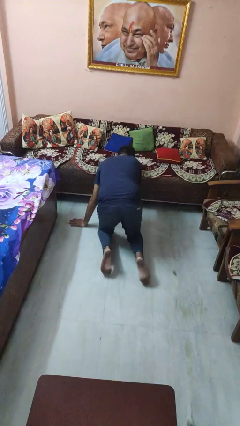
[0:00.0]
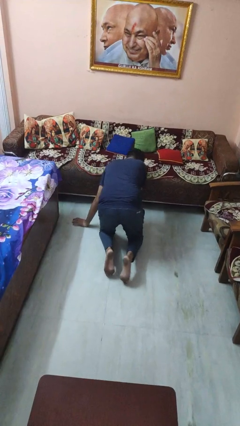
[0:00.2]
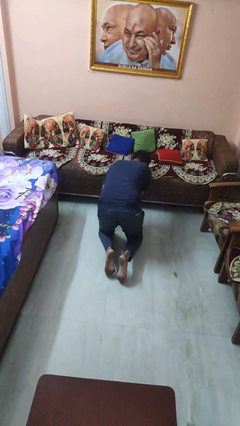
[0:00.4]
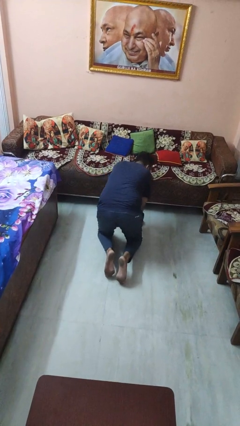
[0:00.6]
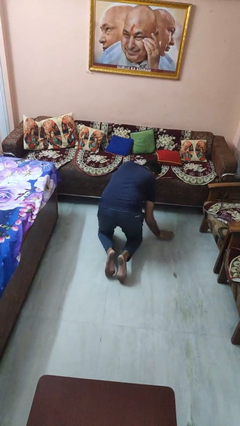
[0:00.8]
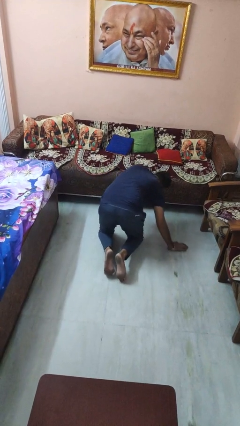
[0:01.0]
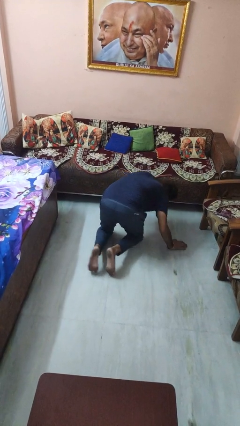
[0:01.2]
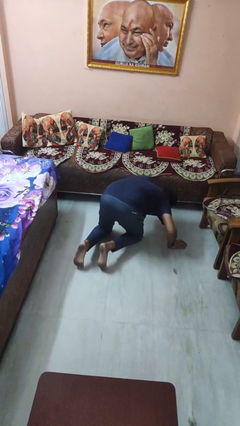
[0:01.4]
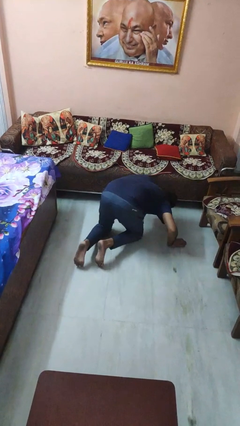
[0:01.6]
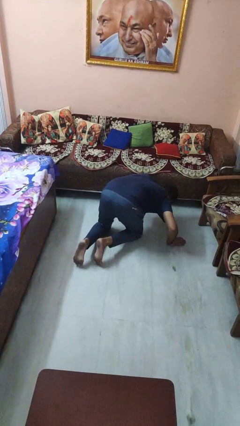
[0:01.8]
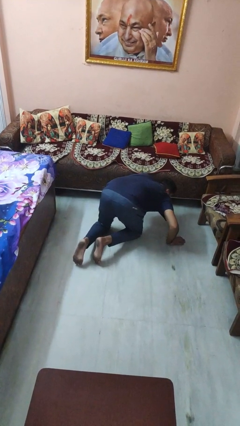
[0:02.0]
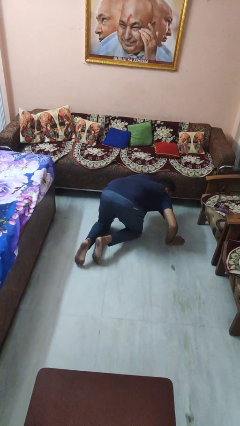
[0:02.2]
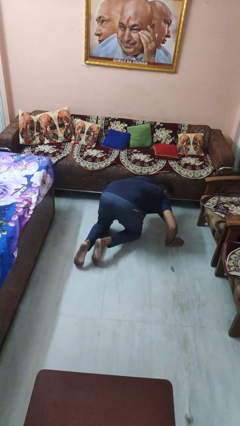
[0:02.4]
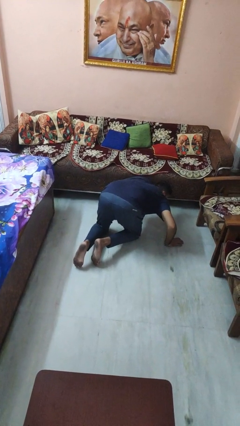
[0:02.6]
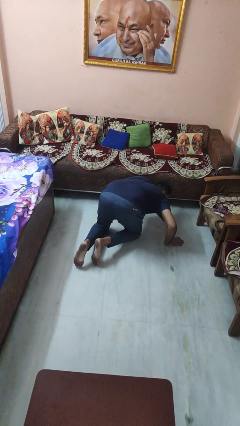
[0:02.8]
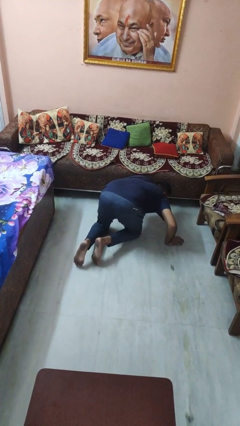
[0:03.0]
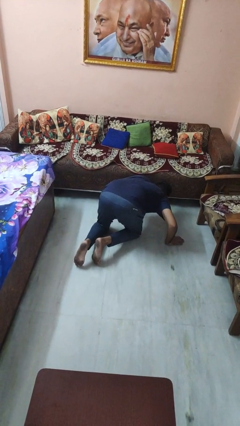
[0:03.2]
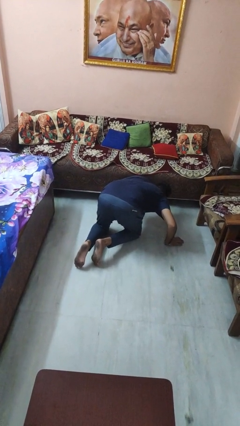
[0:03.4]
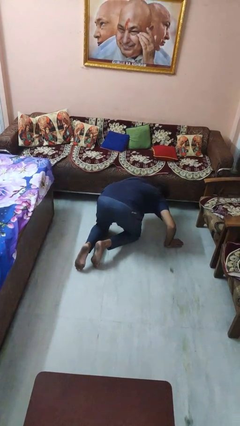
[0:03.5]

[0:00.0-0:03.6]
person searches under couch

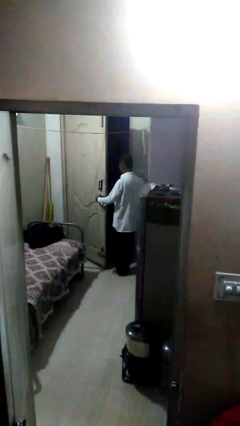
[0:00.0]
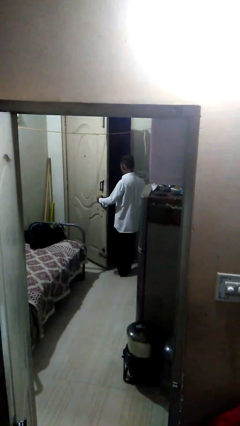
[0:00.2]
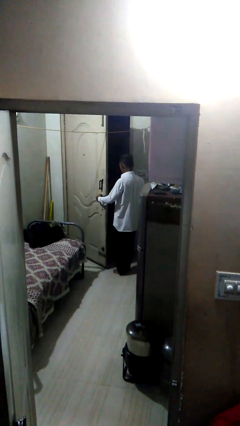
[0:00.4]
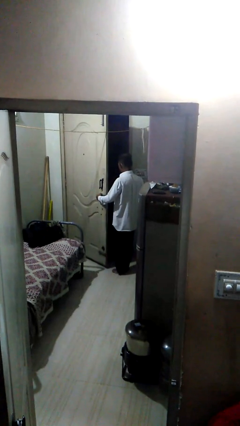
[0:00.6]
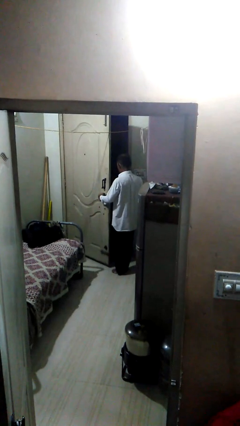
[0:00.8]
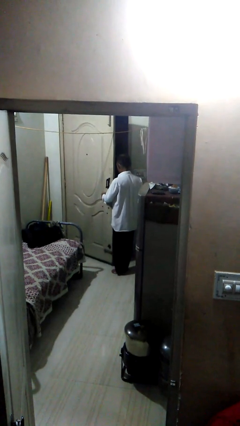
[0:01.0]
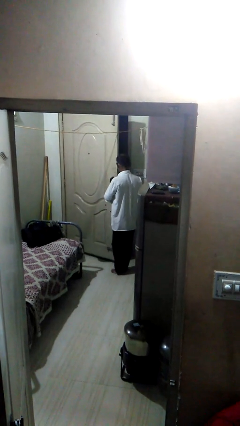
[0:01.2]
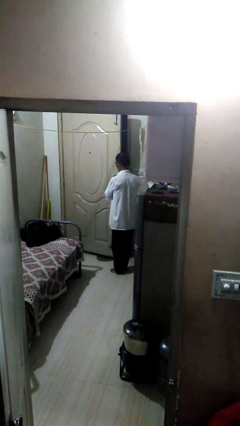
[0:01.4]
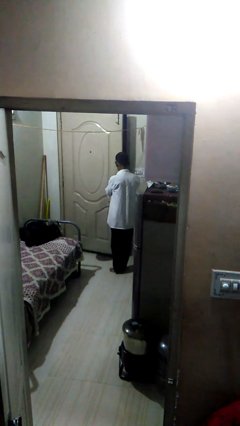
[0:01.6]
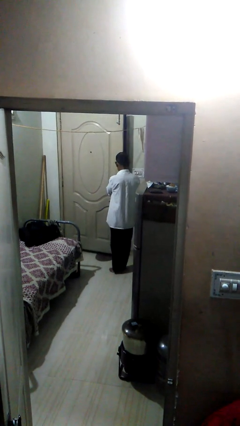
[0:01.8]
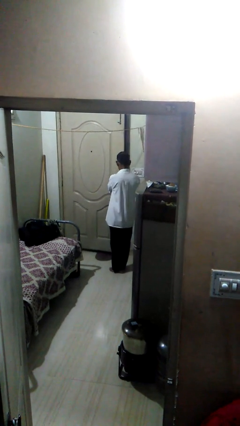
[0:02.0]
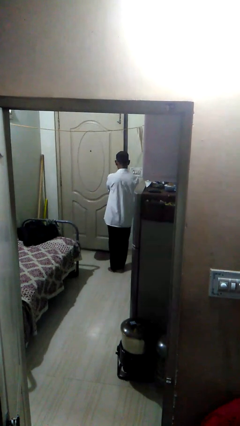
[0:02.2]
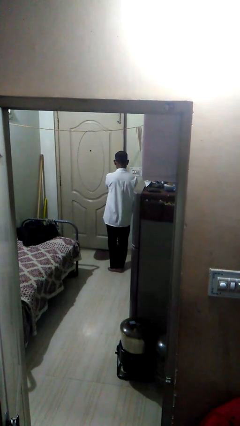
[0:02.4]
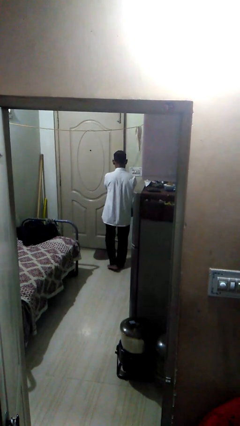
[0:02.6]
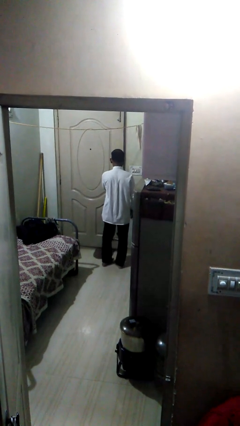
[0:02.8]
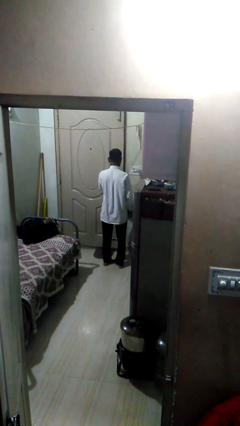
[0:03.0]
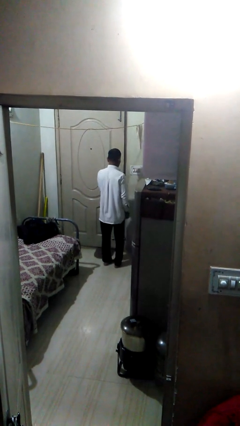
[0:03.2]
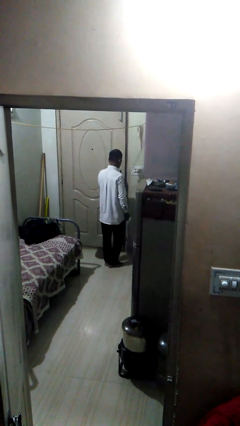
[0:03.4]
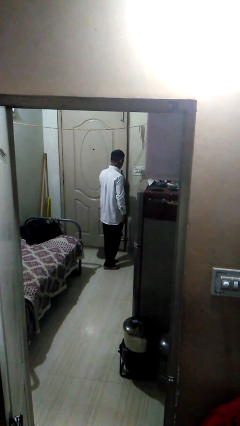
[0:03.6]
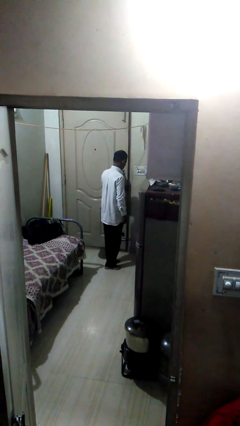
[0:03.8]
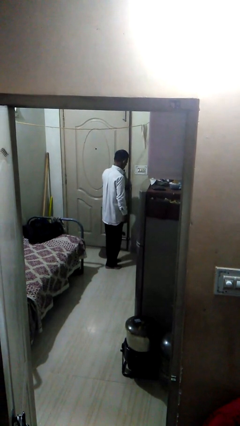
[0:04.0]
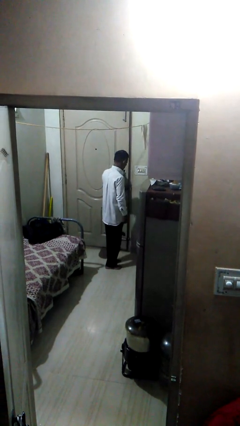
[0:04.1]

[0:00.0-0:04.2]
person closes facility door

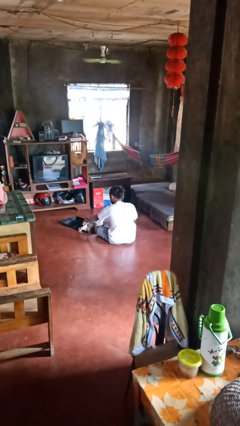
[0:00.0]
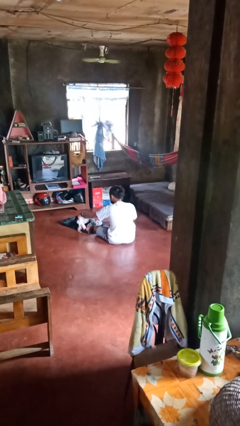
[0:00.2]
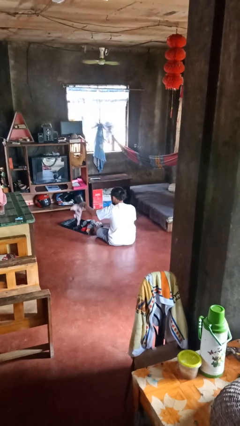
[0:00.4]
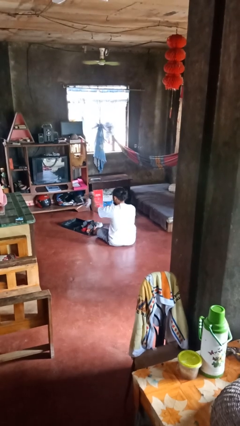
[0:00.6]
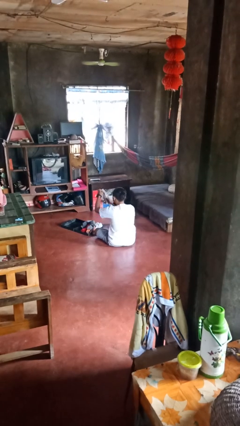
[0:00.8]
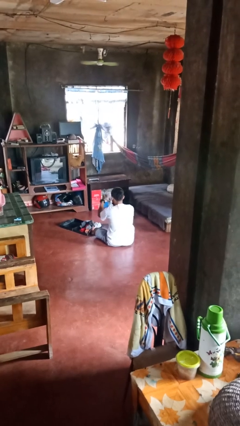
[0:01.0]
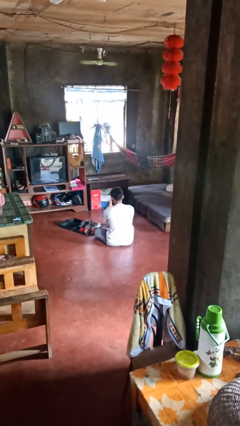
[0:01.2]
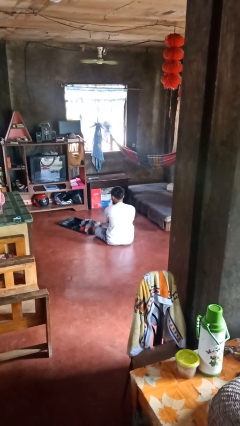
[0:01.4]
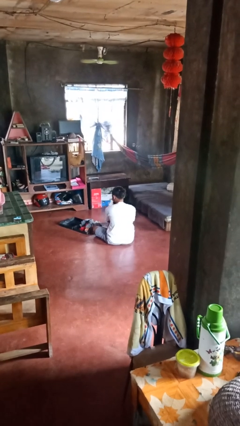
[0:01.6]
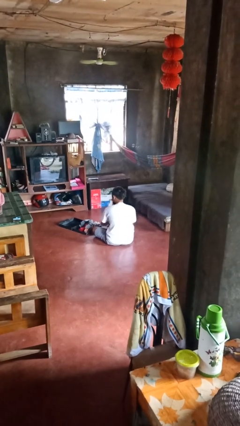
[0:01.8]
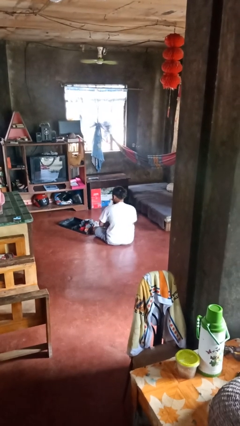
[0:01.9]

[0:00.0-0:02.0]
person unloads clothes from suitcase

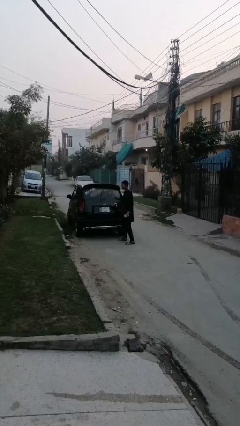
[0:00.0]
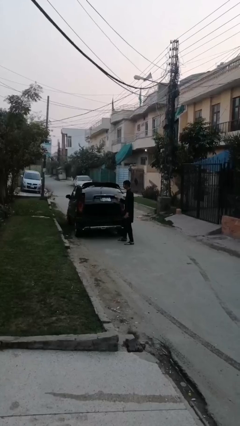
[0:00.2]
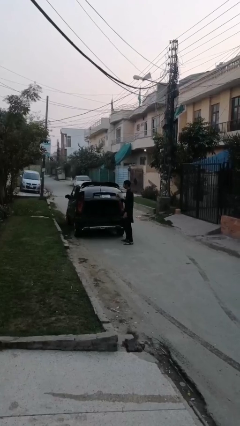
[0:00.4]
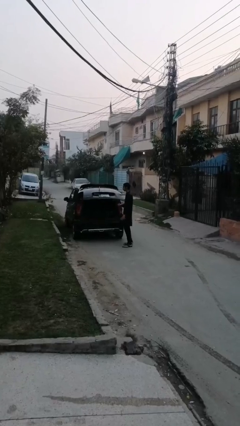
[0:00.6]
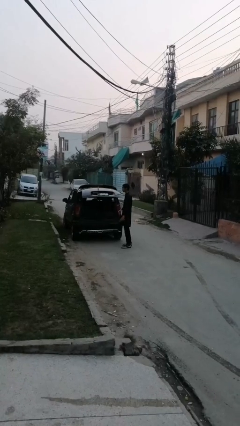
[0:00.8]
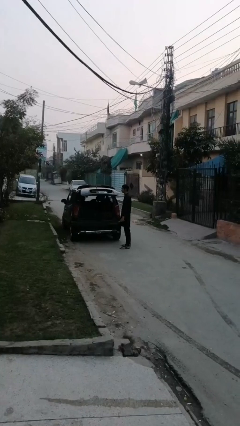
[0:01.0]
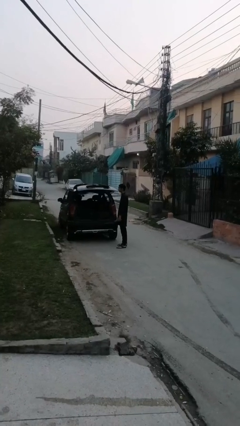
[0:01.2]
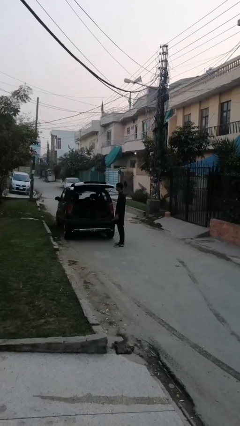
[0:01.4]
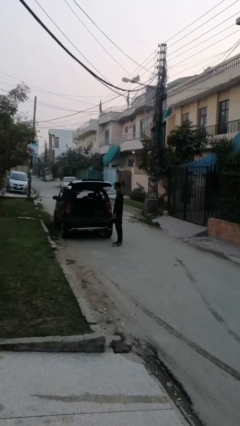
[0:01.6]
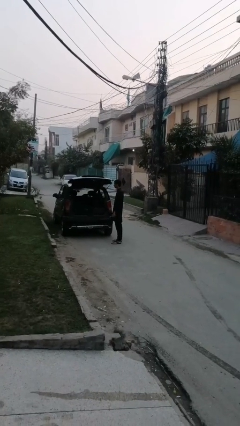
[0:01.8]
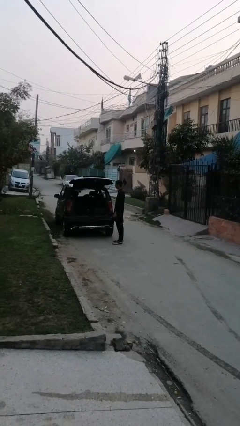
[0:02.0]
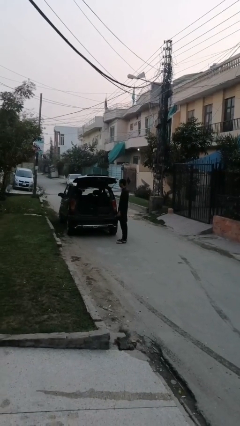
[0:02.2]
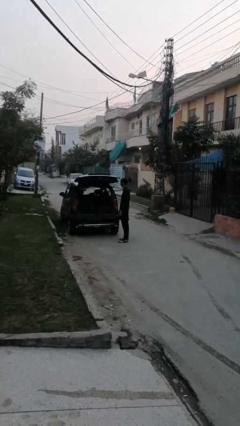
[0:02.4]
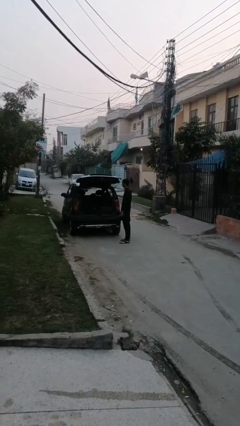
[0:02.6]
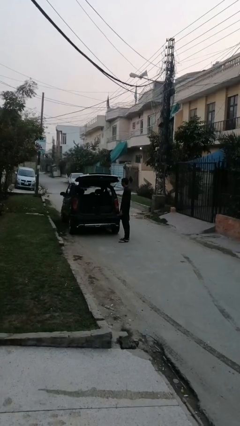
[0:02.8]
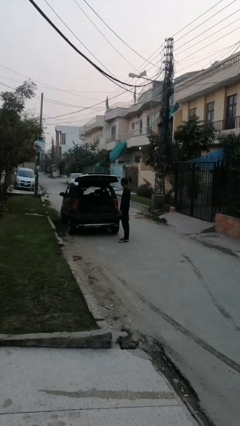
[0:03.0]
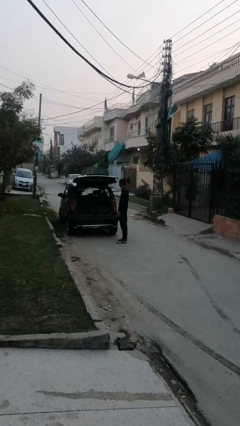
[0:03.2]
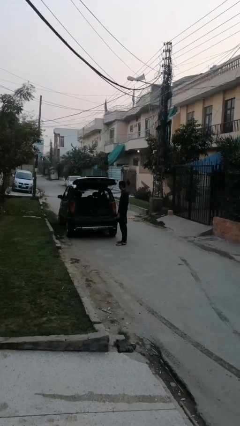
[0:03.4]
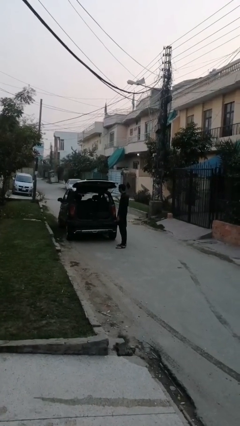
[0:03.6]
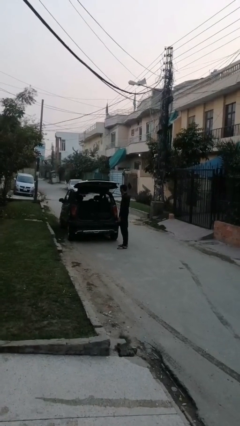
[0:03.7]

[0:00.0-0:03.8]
person opens car trunk

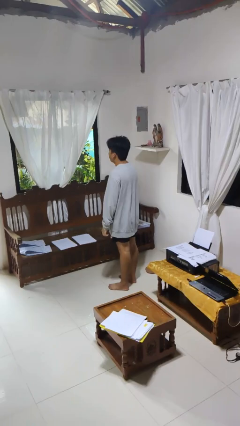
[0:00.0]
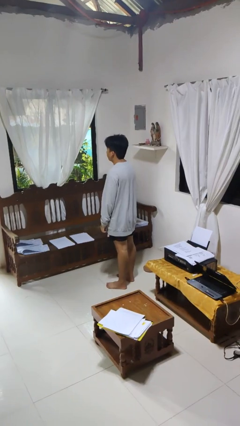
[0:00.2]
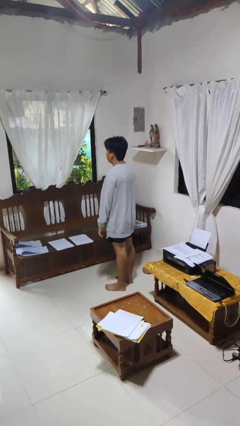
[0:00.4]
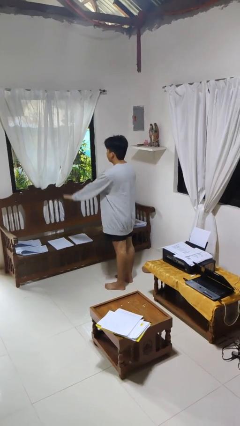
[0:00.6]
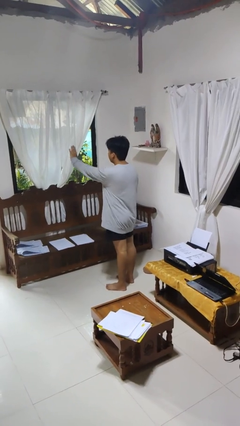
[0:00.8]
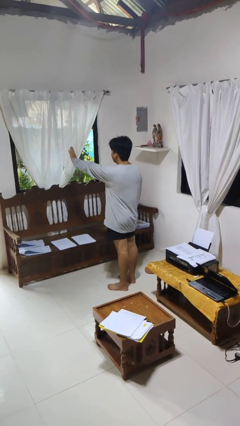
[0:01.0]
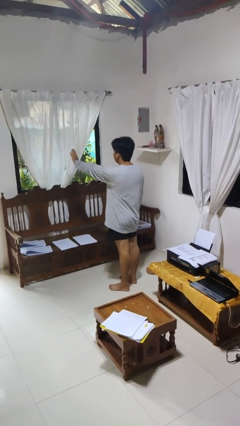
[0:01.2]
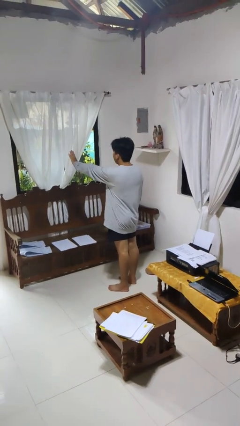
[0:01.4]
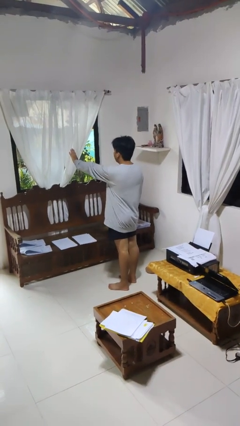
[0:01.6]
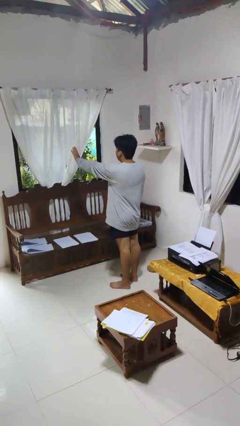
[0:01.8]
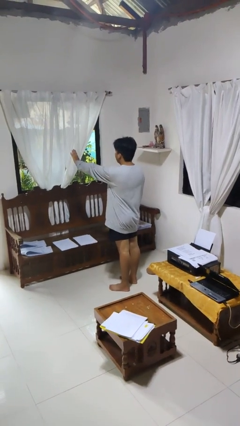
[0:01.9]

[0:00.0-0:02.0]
person gestures stop

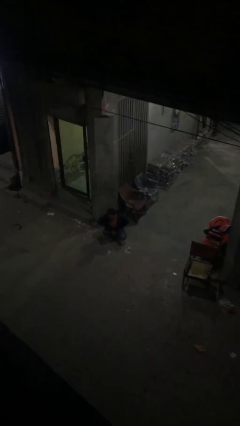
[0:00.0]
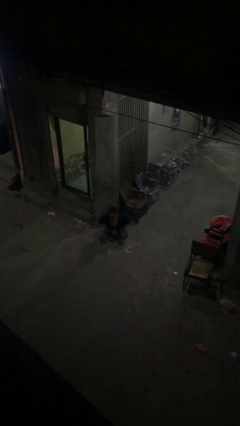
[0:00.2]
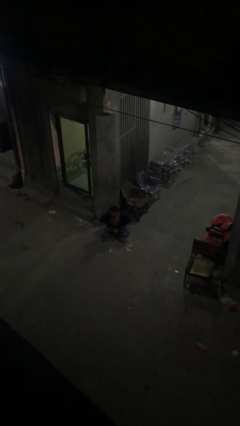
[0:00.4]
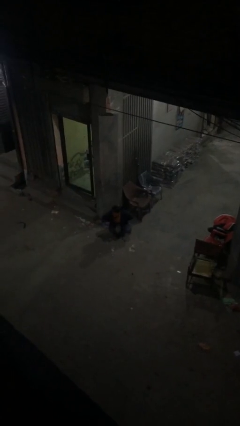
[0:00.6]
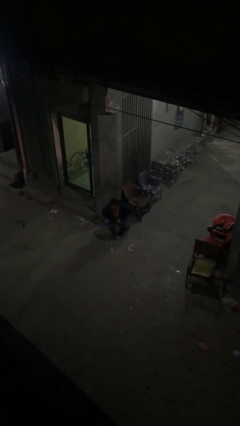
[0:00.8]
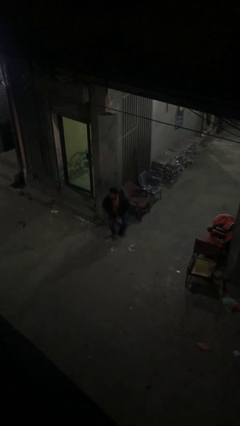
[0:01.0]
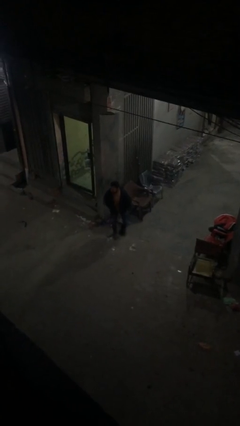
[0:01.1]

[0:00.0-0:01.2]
person stands up

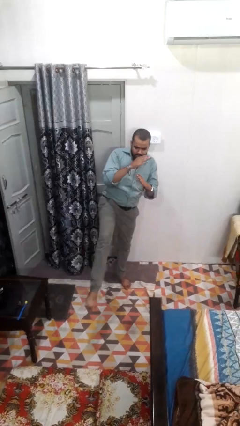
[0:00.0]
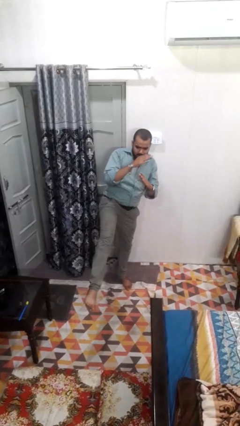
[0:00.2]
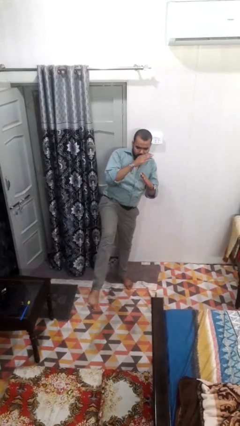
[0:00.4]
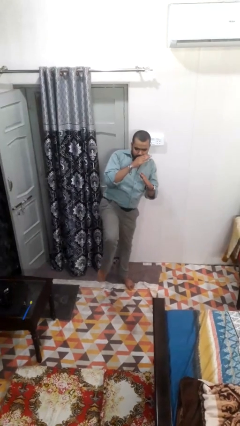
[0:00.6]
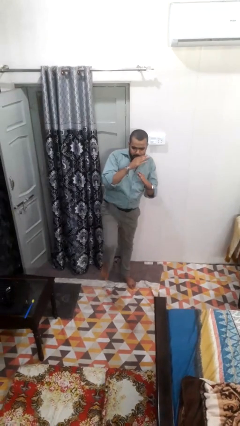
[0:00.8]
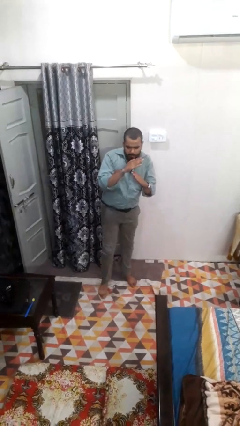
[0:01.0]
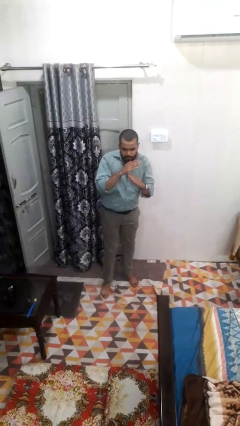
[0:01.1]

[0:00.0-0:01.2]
person karate kicks
